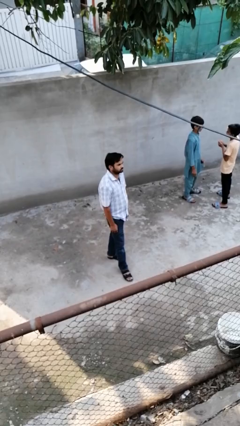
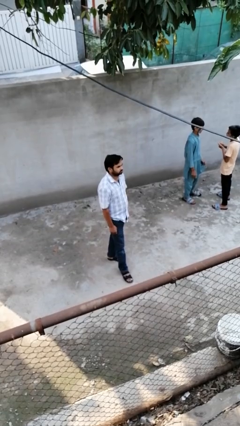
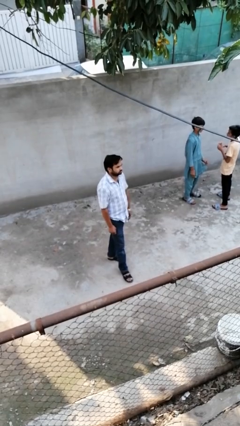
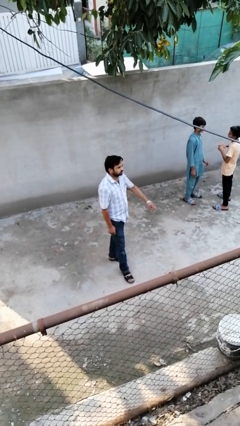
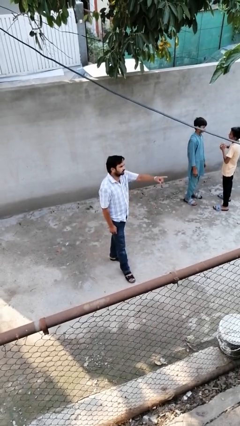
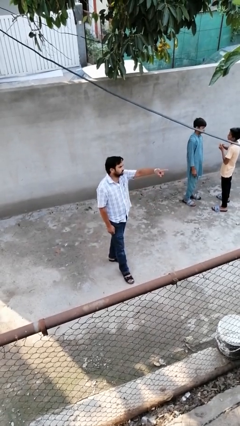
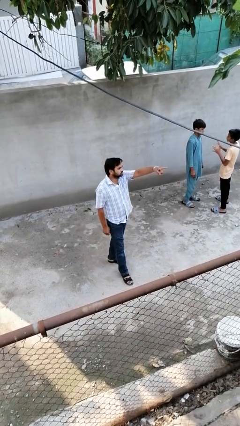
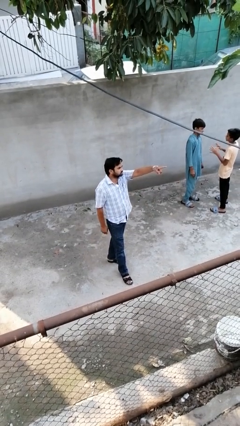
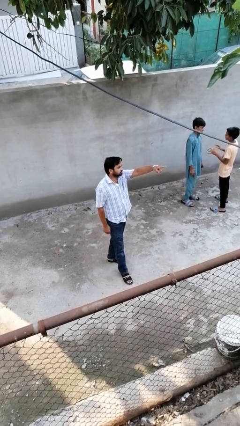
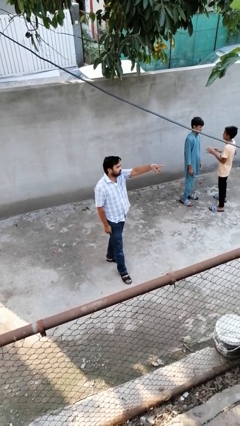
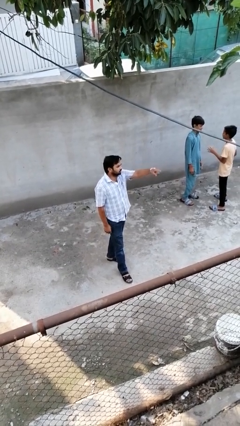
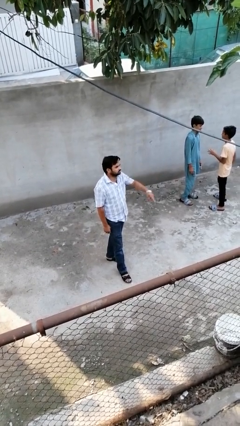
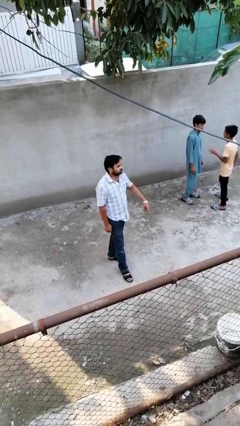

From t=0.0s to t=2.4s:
person points at person

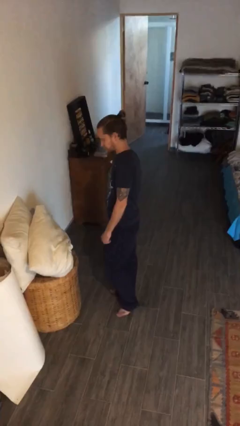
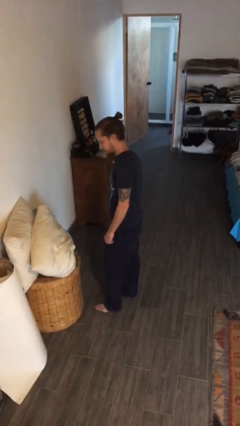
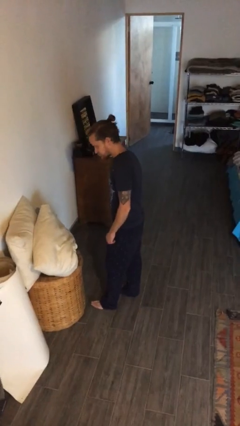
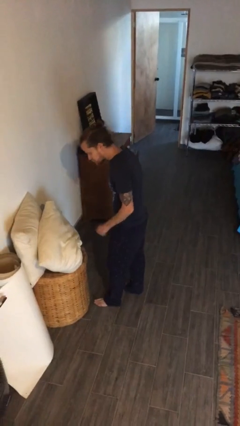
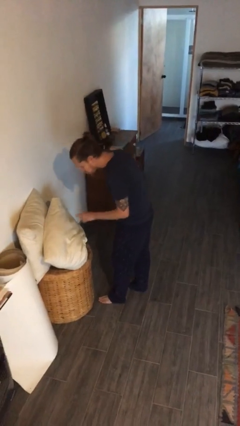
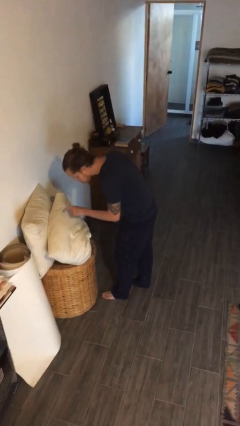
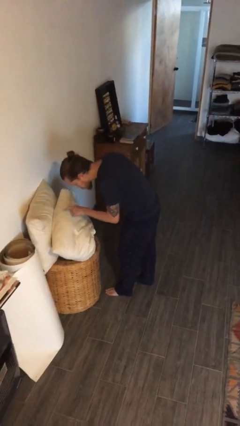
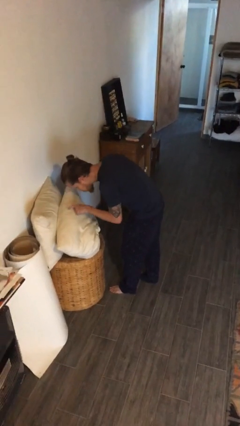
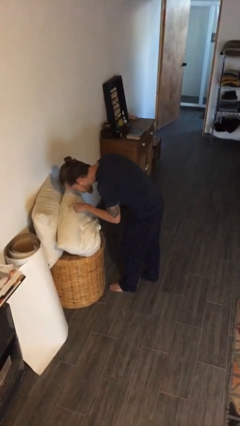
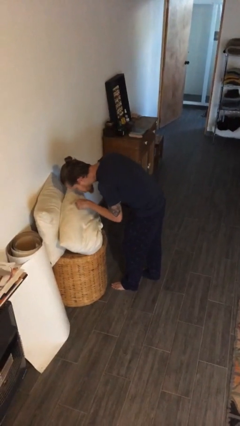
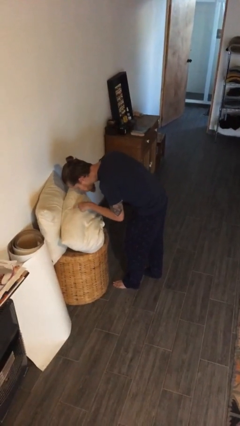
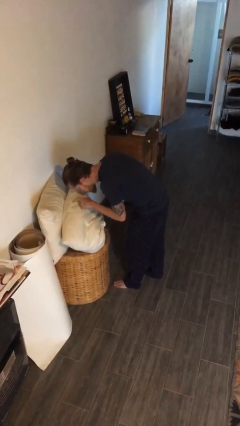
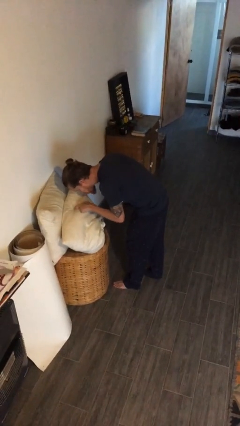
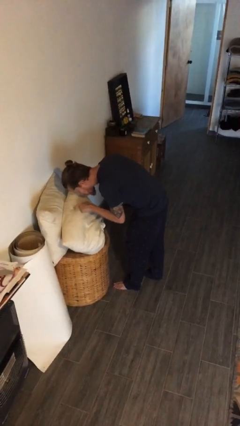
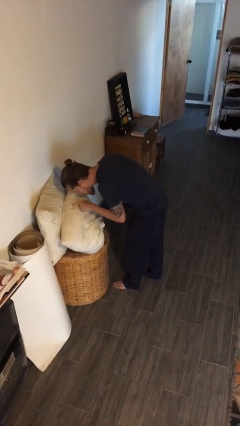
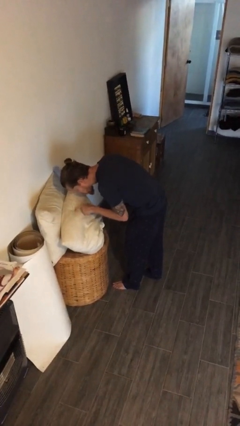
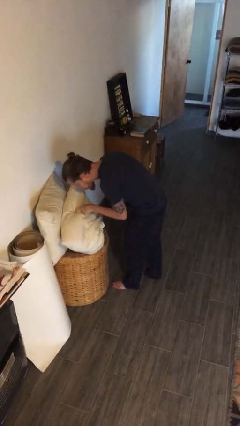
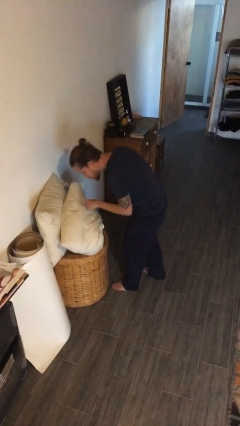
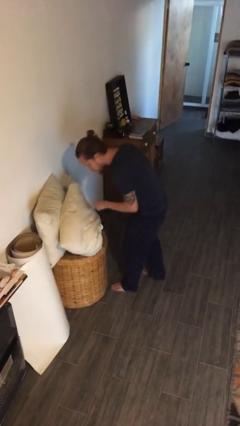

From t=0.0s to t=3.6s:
person taps object with finger

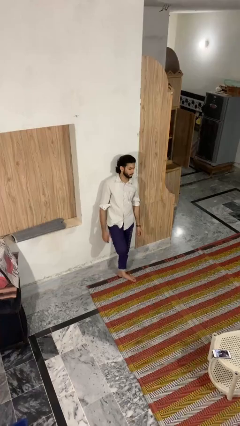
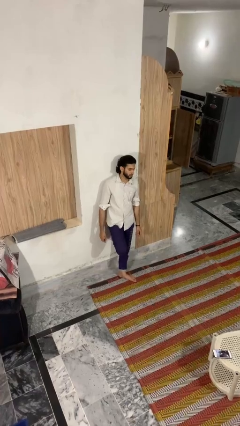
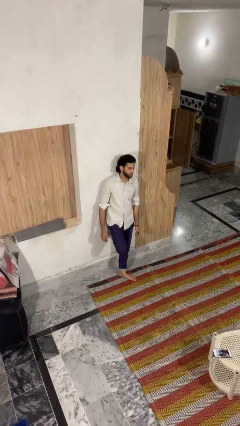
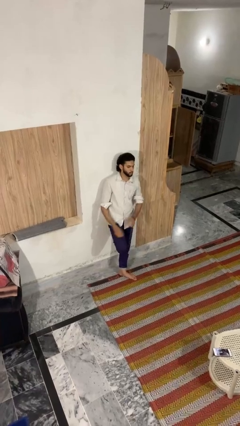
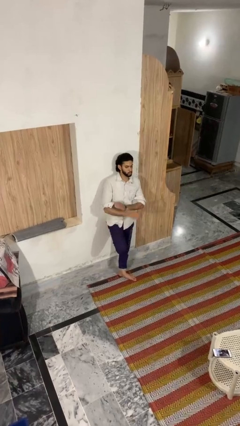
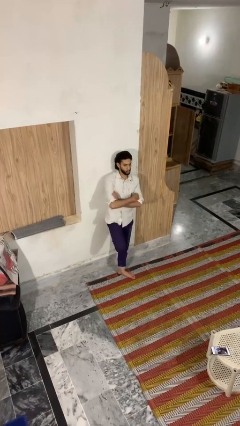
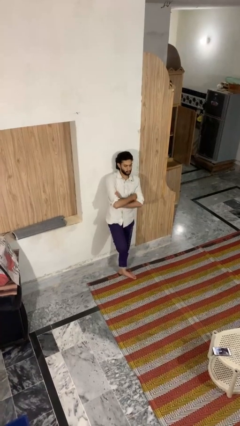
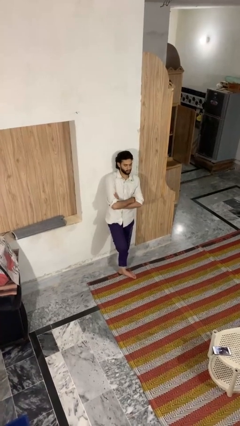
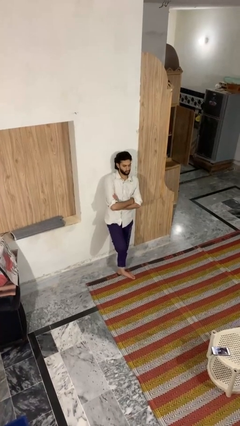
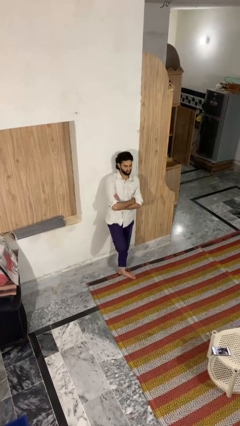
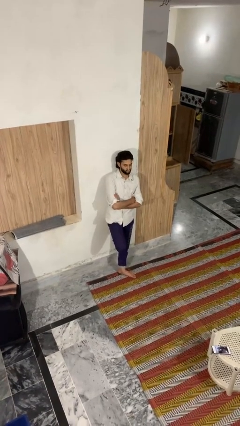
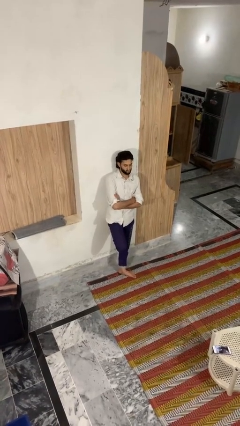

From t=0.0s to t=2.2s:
person crosses arms

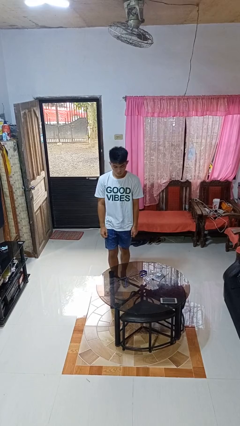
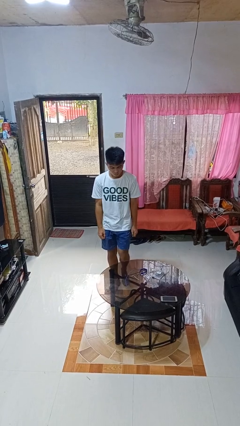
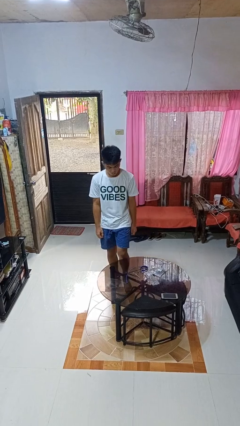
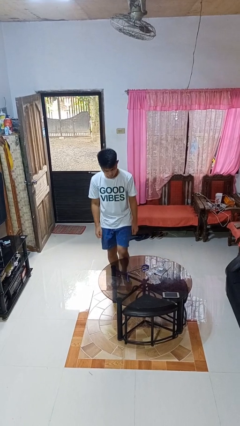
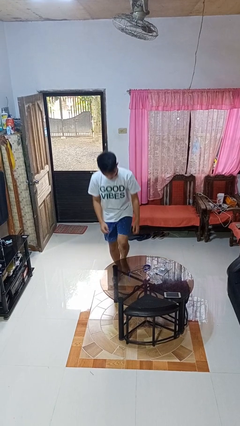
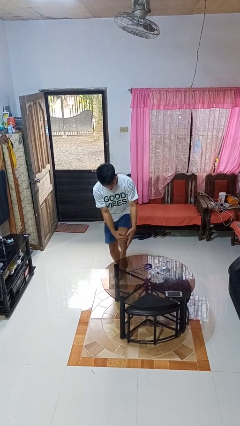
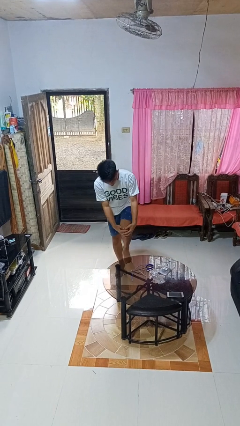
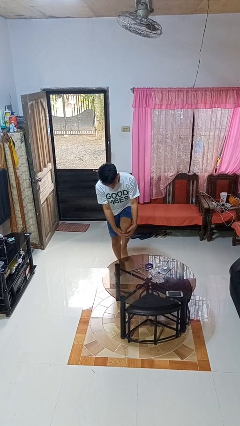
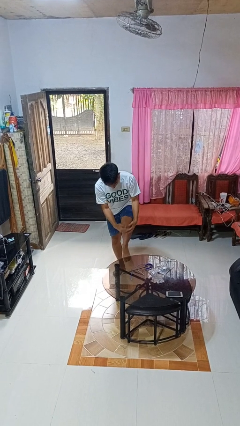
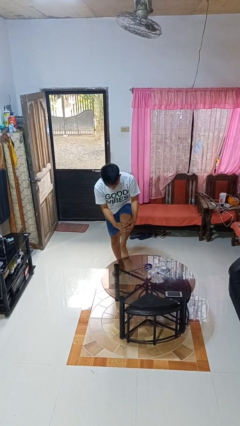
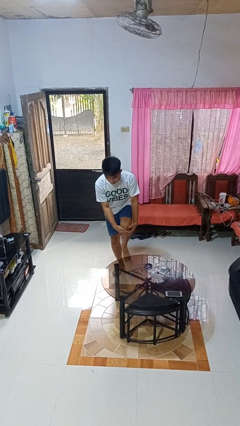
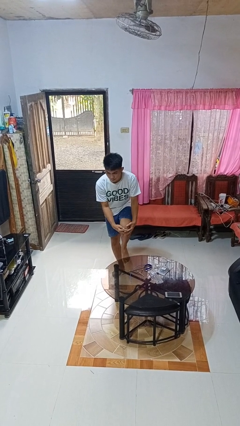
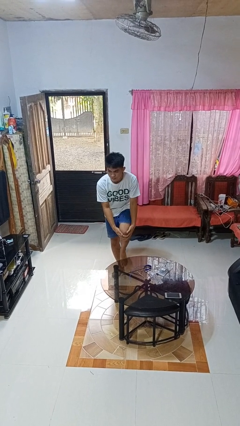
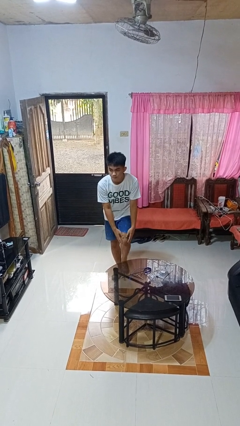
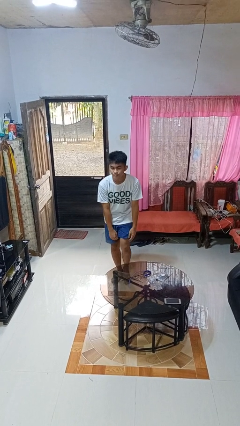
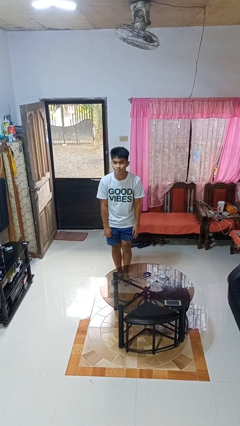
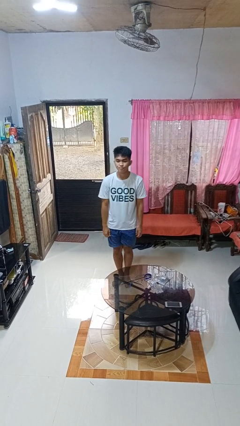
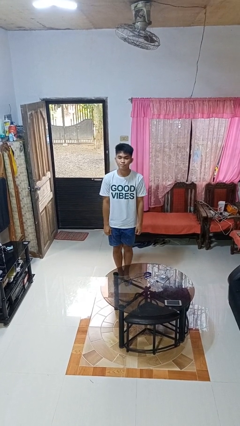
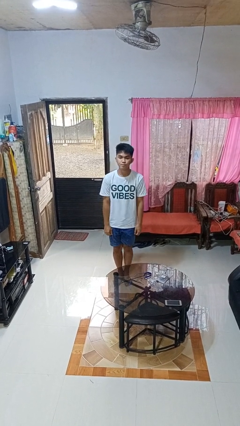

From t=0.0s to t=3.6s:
person bumps into table

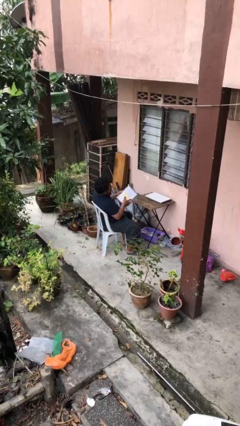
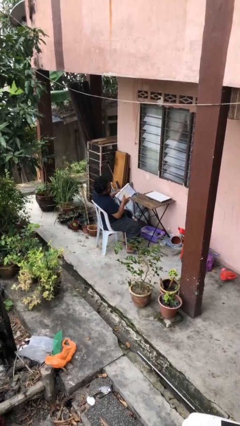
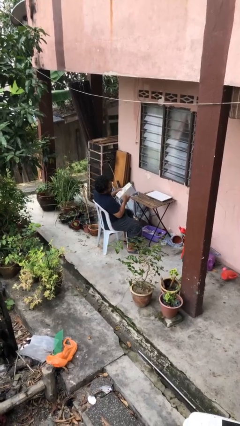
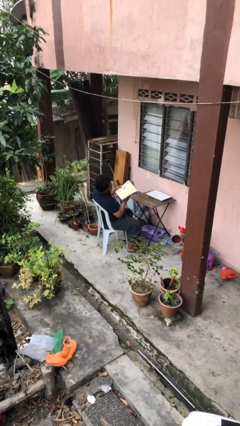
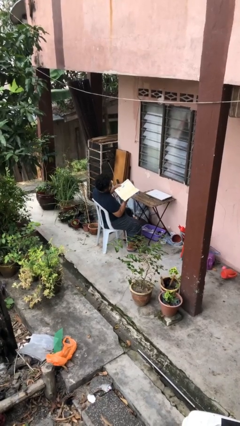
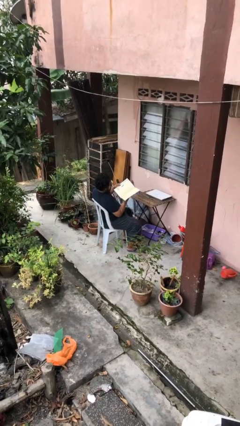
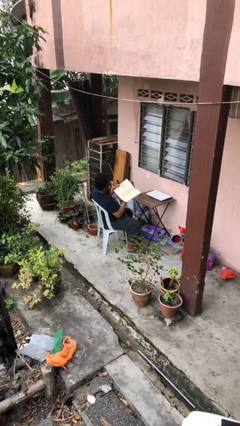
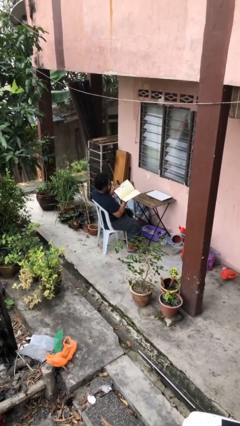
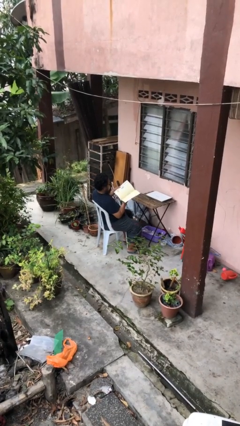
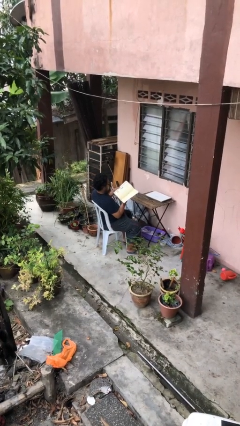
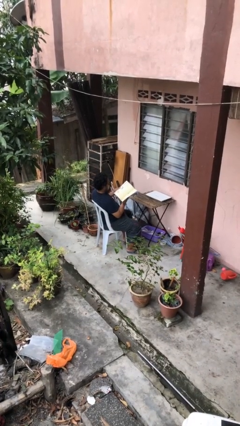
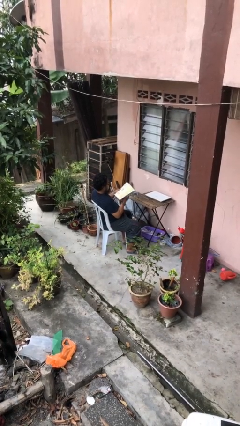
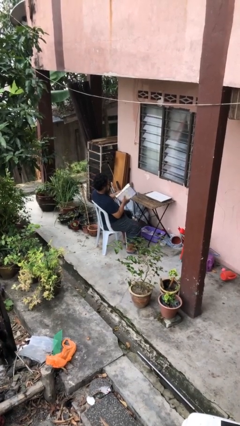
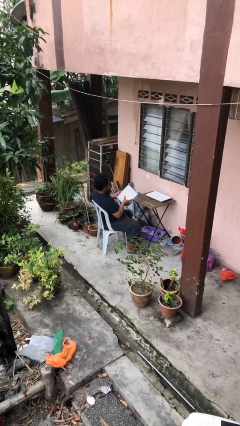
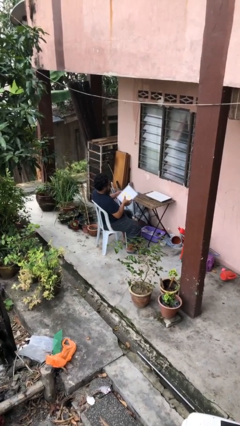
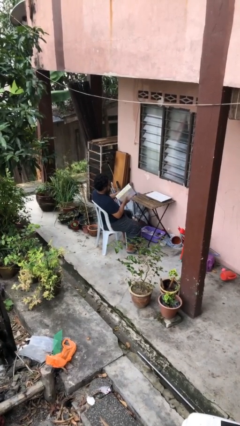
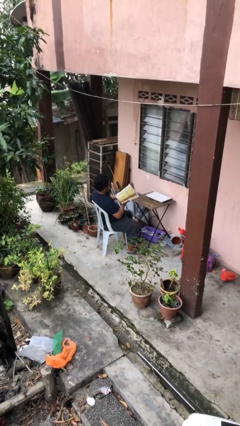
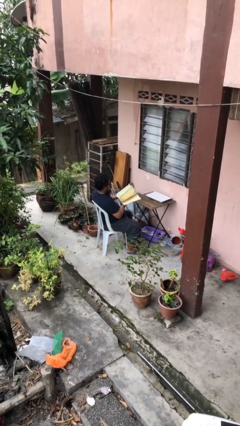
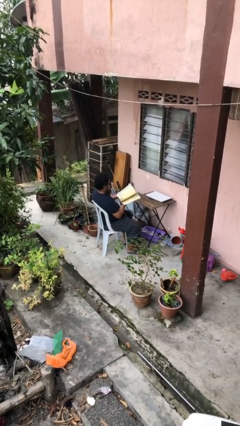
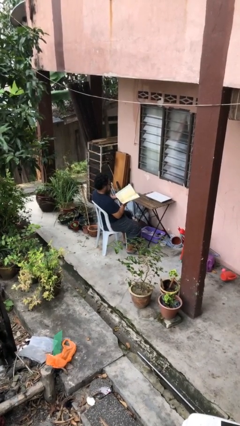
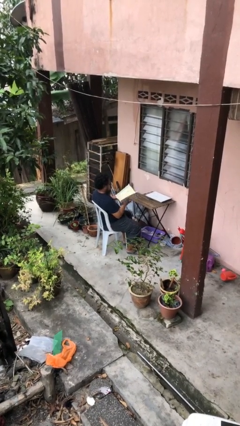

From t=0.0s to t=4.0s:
person reads document

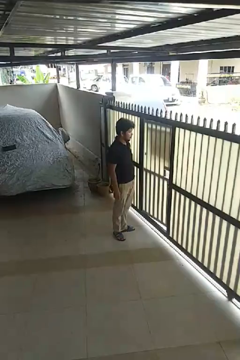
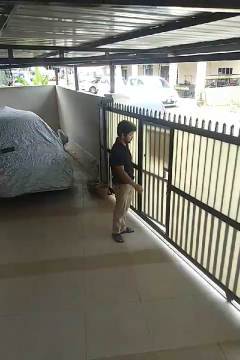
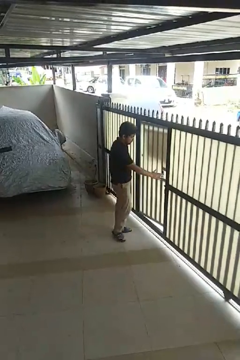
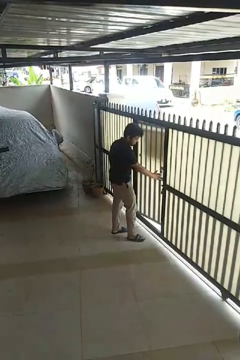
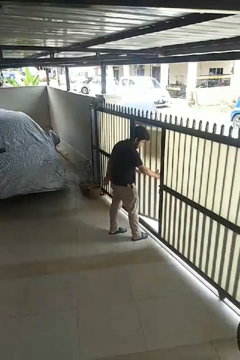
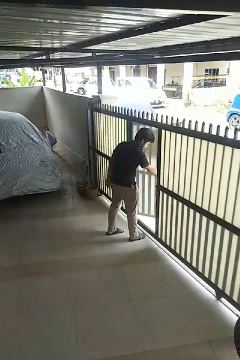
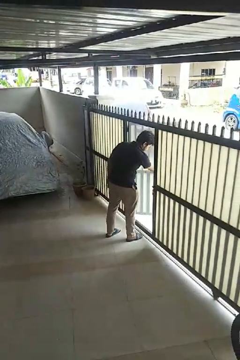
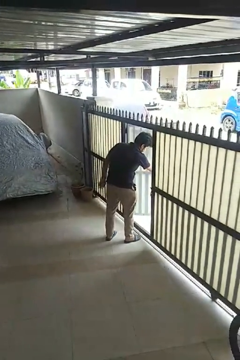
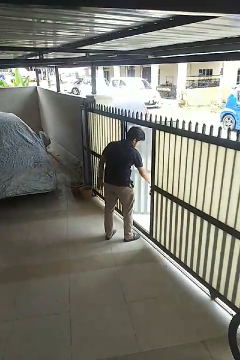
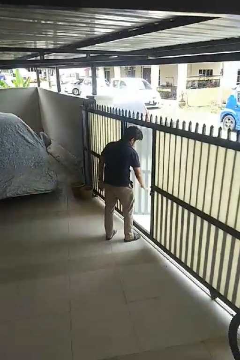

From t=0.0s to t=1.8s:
person opens gate
